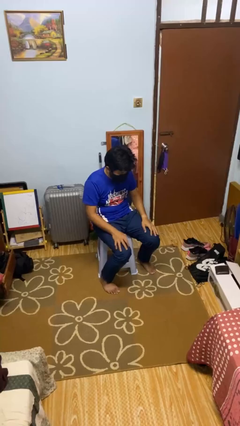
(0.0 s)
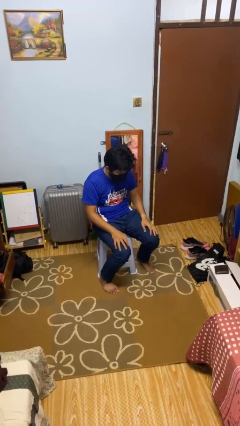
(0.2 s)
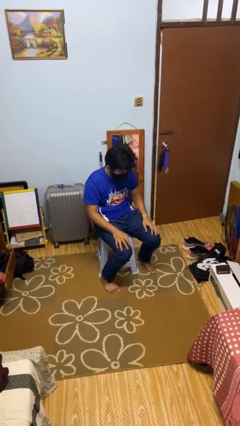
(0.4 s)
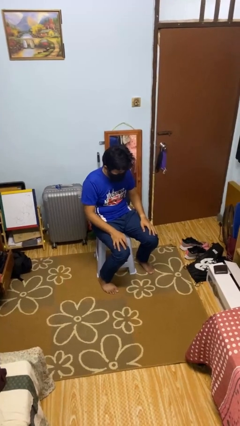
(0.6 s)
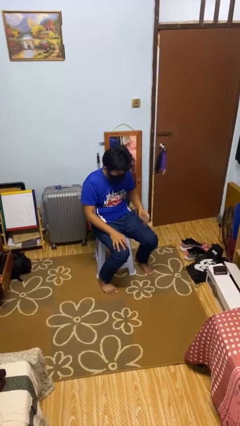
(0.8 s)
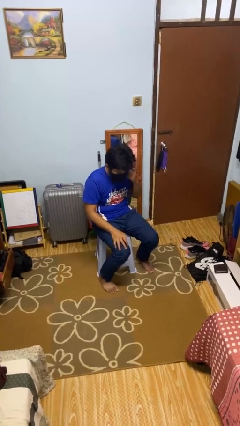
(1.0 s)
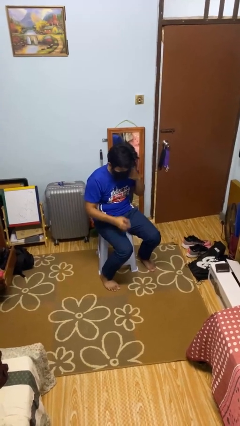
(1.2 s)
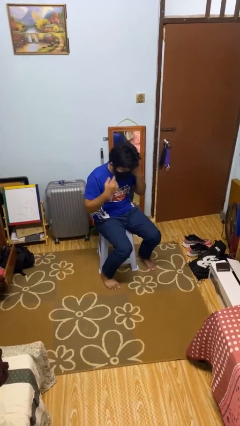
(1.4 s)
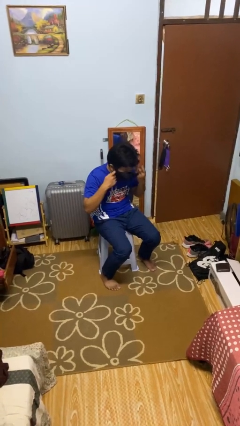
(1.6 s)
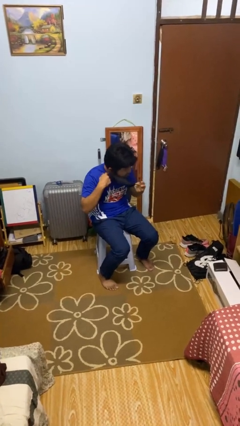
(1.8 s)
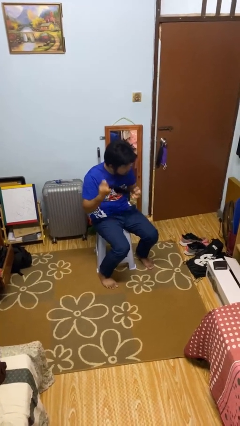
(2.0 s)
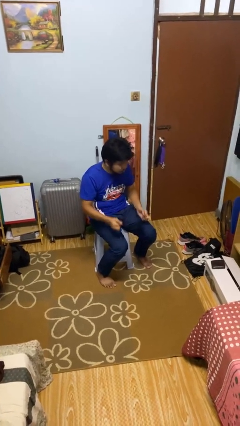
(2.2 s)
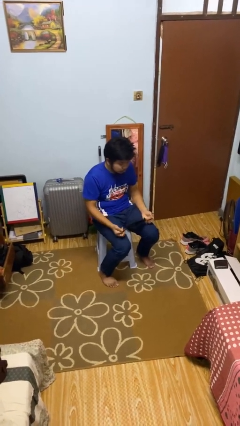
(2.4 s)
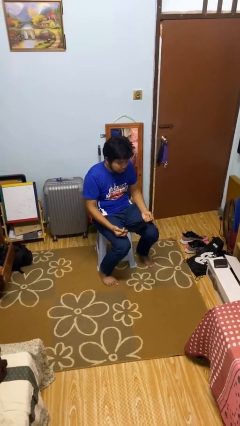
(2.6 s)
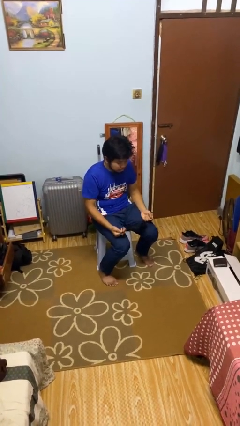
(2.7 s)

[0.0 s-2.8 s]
person takes off facemask

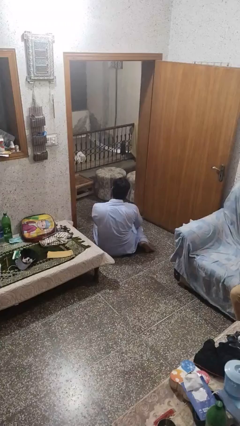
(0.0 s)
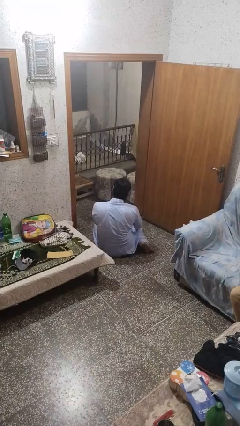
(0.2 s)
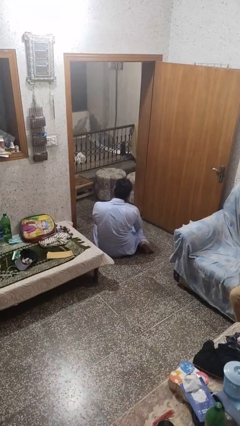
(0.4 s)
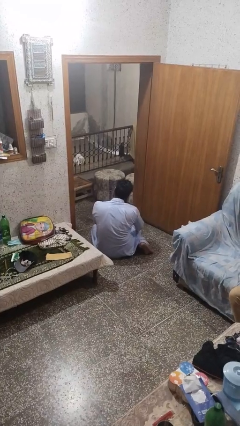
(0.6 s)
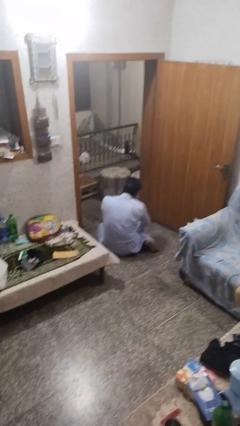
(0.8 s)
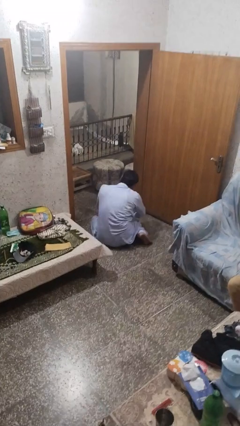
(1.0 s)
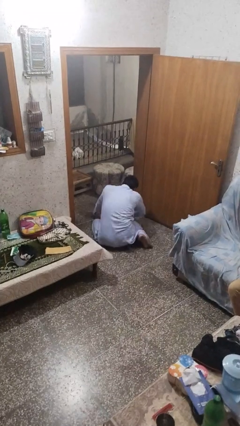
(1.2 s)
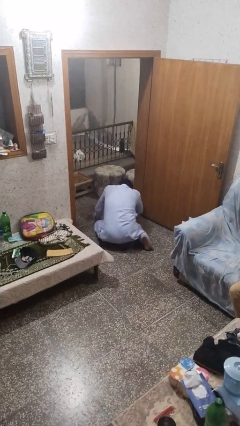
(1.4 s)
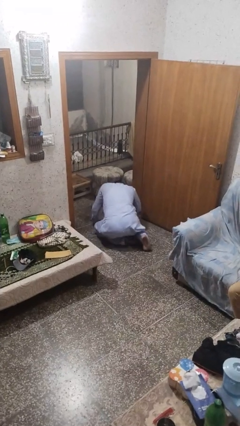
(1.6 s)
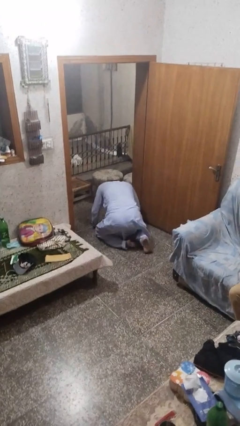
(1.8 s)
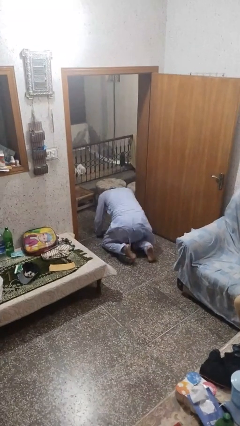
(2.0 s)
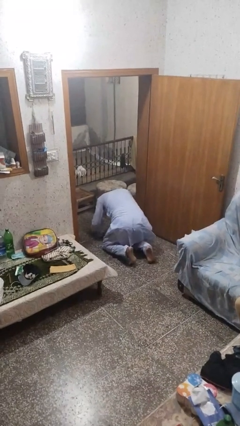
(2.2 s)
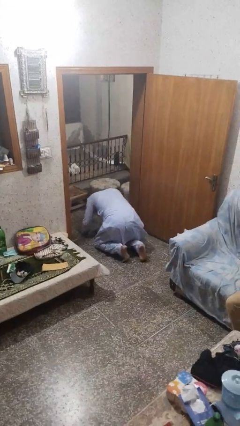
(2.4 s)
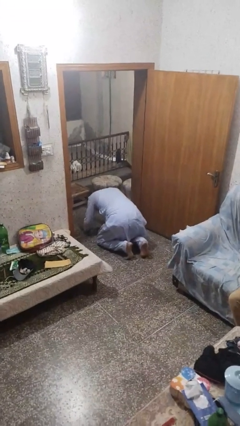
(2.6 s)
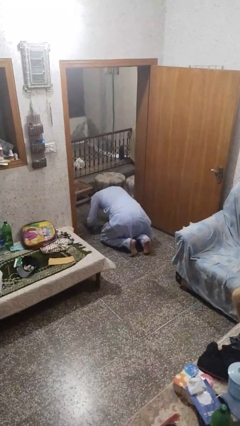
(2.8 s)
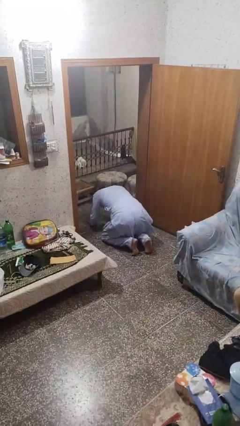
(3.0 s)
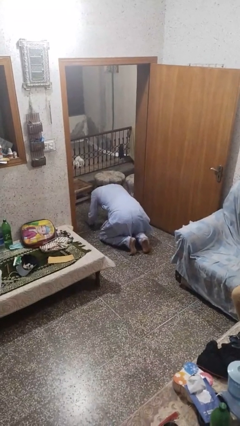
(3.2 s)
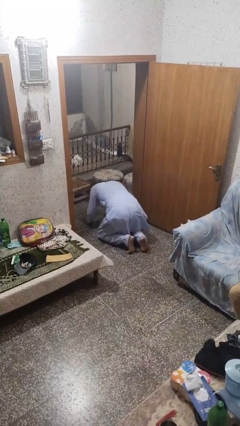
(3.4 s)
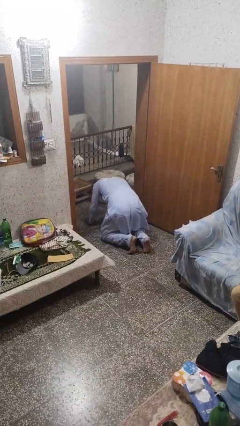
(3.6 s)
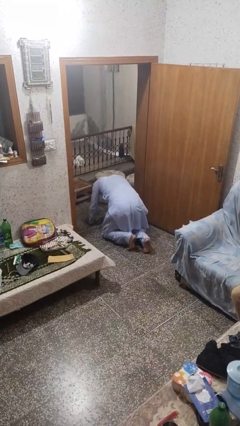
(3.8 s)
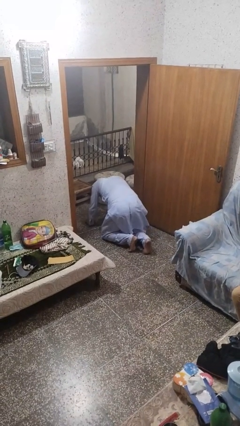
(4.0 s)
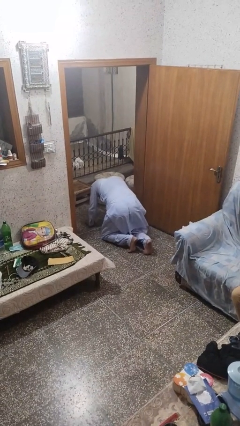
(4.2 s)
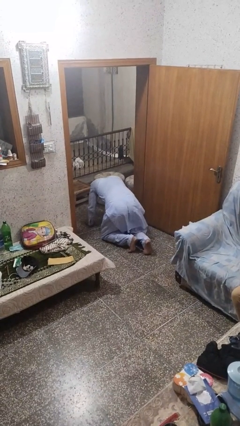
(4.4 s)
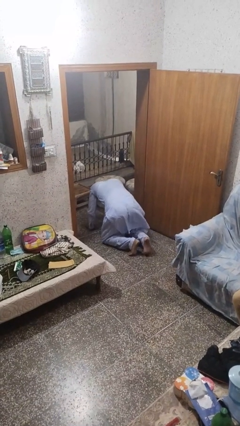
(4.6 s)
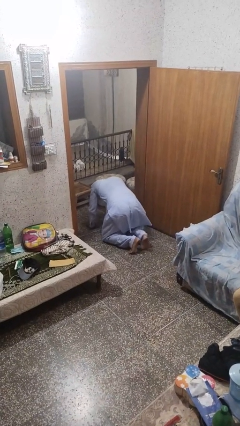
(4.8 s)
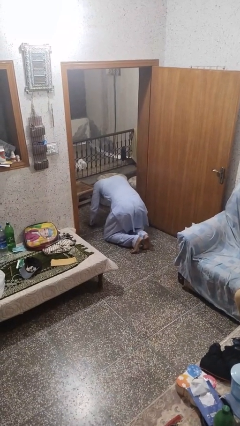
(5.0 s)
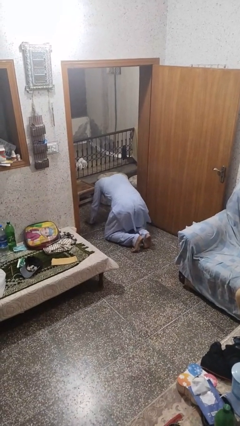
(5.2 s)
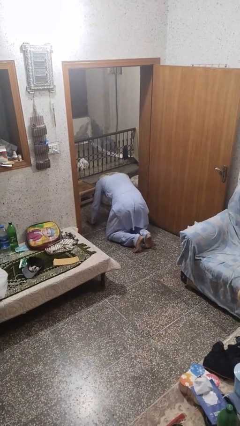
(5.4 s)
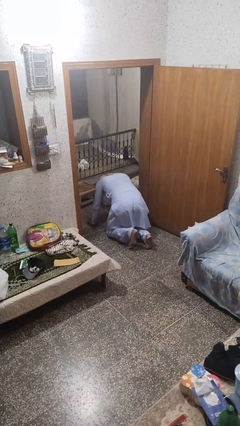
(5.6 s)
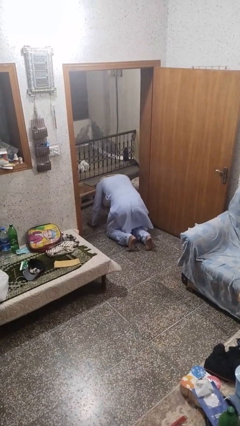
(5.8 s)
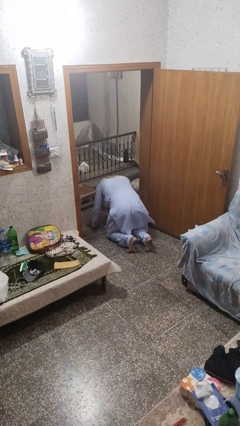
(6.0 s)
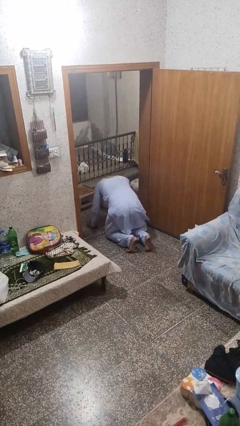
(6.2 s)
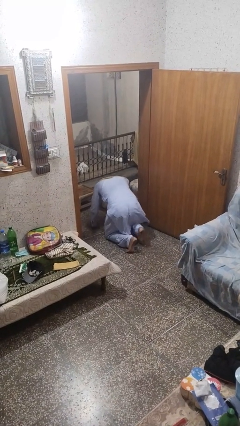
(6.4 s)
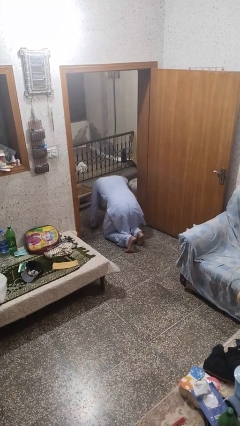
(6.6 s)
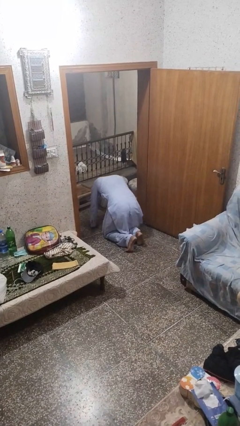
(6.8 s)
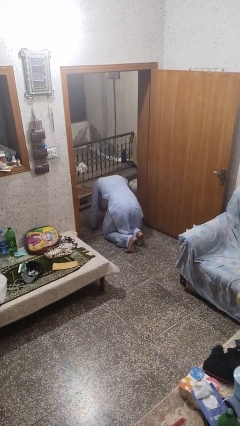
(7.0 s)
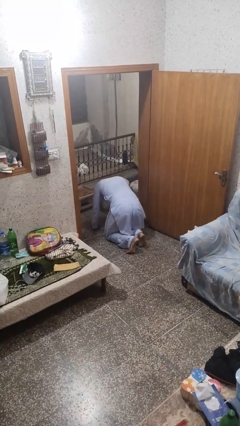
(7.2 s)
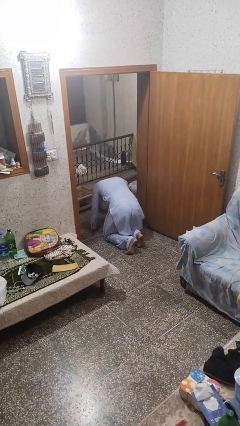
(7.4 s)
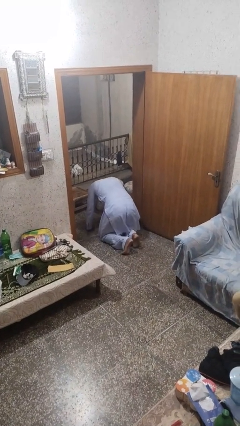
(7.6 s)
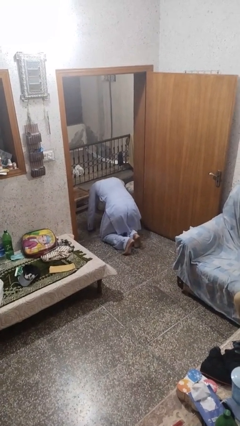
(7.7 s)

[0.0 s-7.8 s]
person crawls

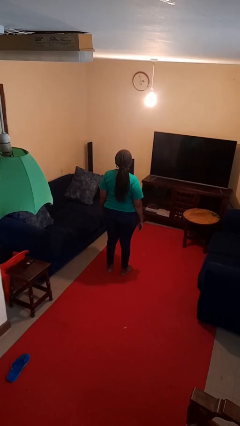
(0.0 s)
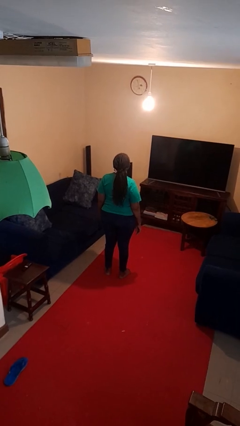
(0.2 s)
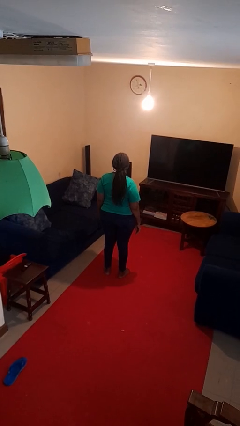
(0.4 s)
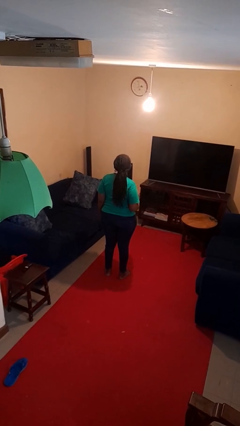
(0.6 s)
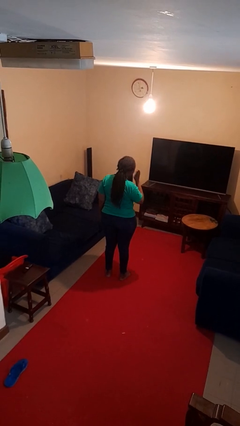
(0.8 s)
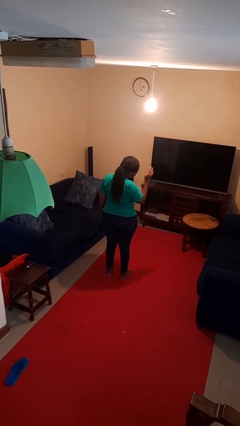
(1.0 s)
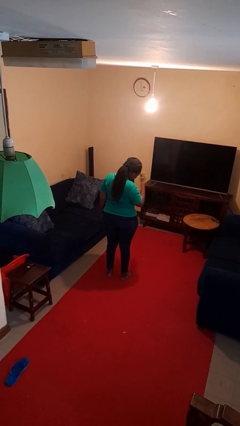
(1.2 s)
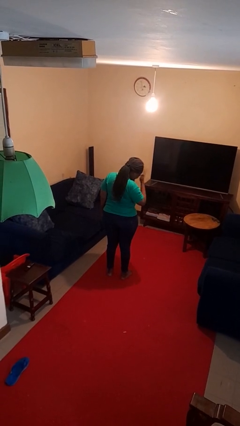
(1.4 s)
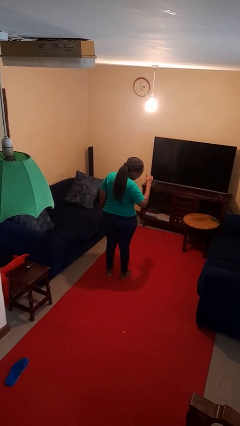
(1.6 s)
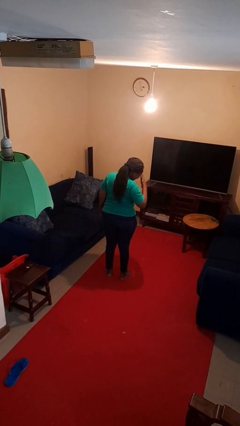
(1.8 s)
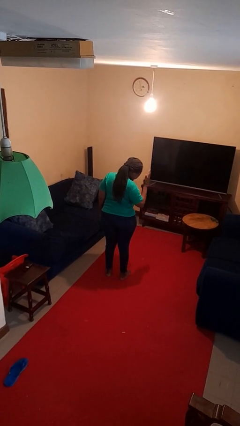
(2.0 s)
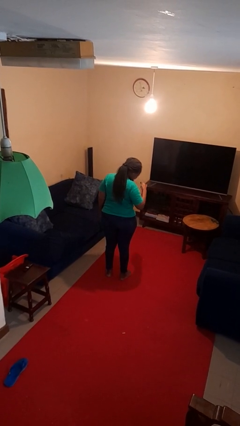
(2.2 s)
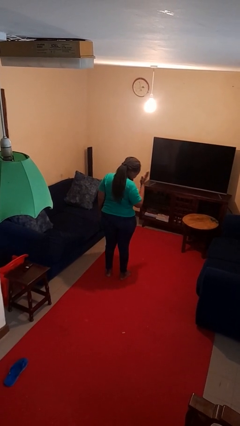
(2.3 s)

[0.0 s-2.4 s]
person swats bug

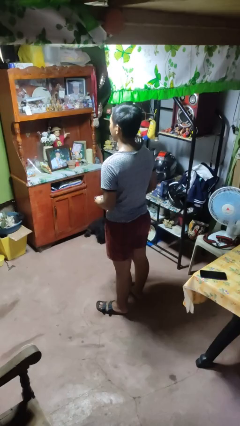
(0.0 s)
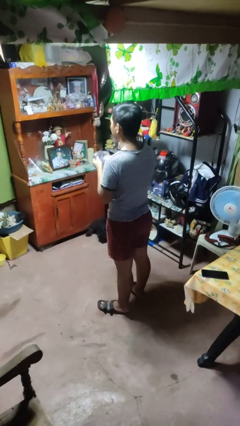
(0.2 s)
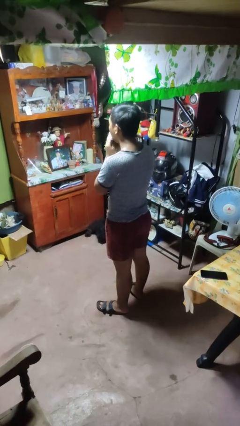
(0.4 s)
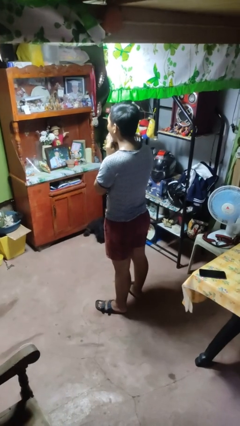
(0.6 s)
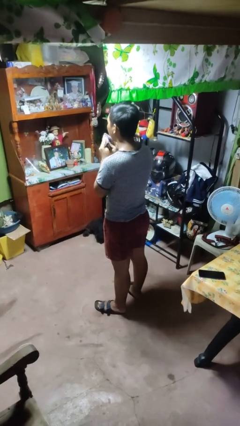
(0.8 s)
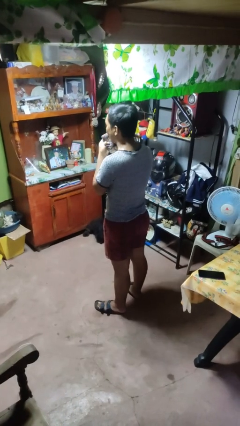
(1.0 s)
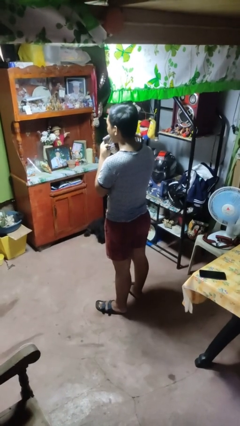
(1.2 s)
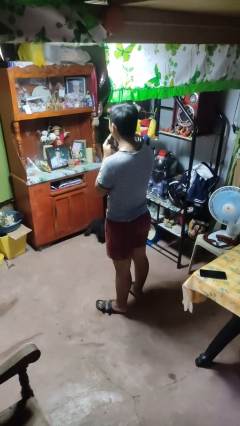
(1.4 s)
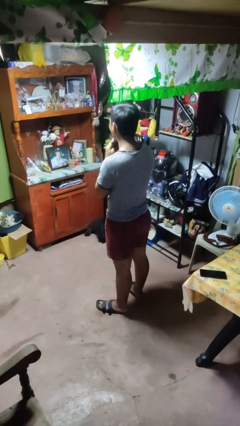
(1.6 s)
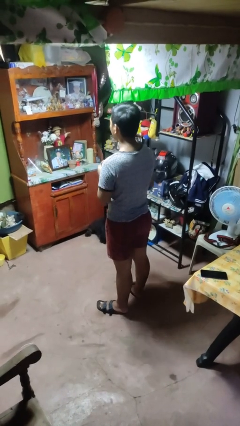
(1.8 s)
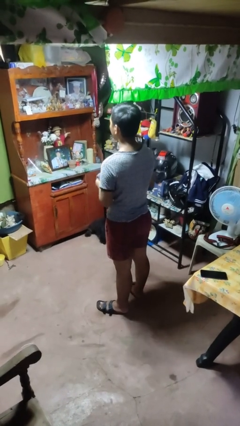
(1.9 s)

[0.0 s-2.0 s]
person wipes mouth with napkin

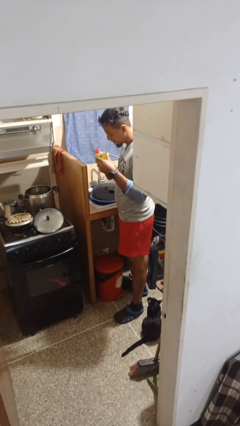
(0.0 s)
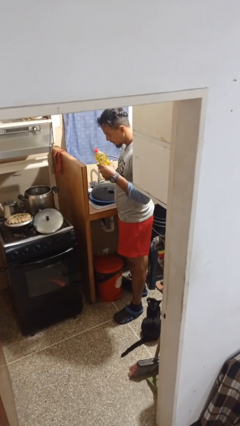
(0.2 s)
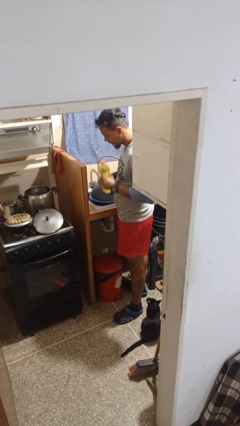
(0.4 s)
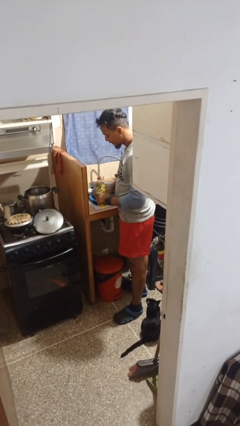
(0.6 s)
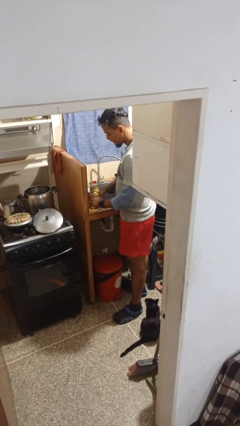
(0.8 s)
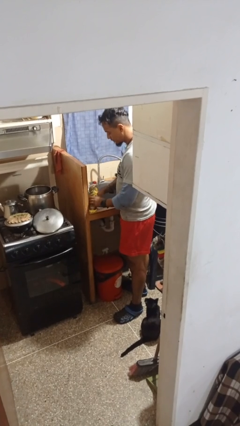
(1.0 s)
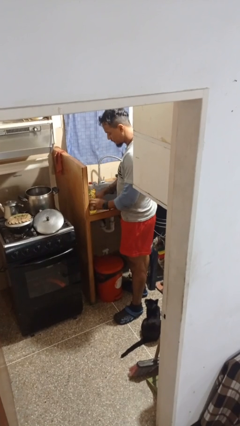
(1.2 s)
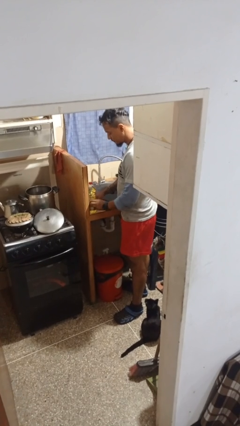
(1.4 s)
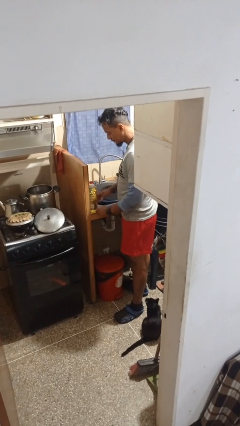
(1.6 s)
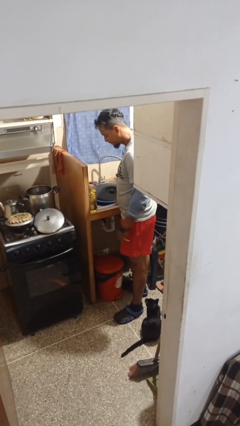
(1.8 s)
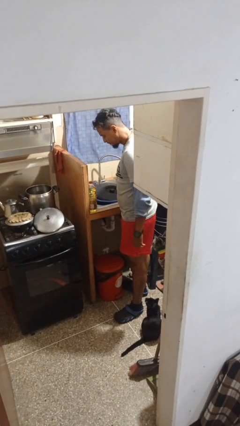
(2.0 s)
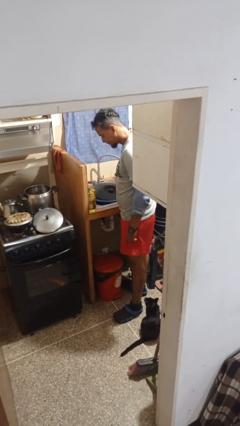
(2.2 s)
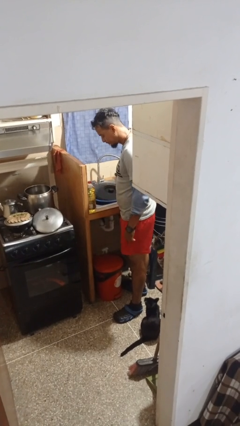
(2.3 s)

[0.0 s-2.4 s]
person puts down object on countertop
